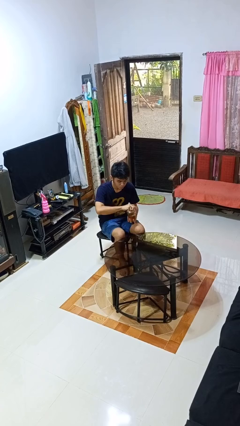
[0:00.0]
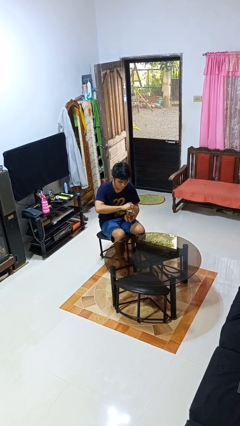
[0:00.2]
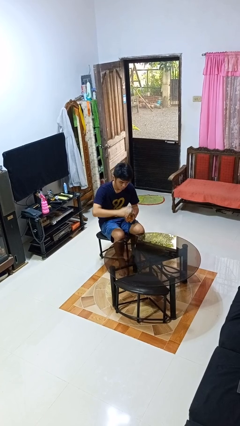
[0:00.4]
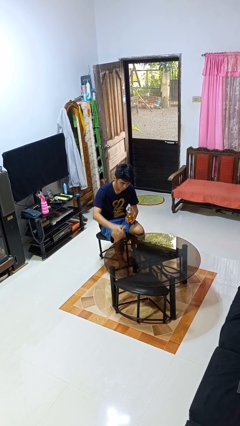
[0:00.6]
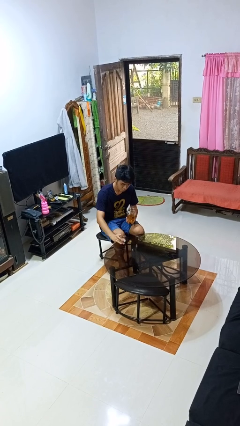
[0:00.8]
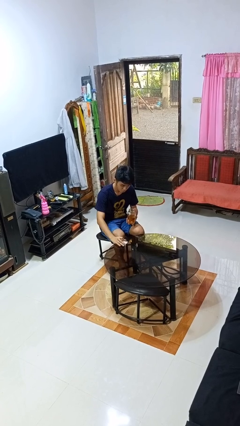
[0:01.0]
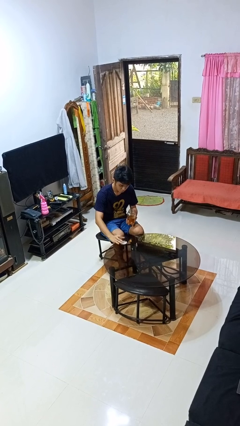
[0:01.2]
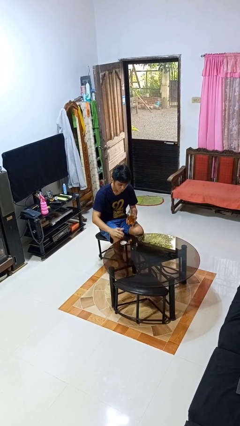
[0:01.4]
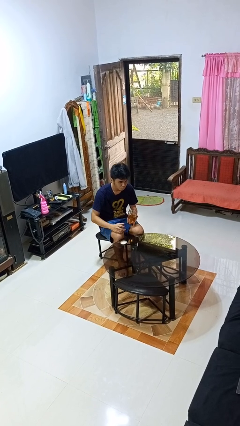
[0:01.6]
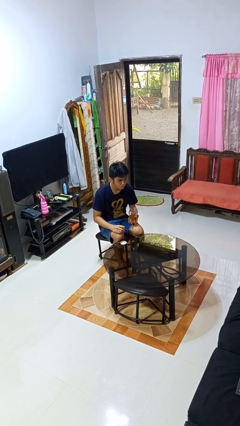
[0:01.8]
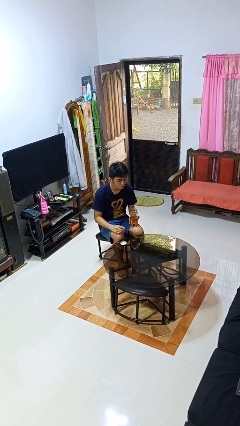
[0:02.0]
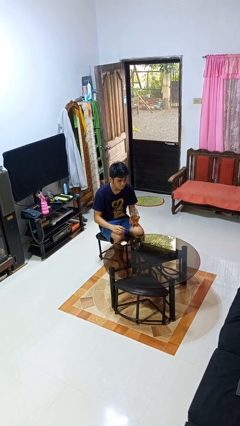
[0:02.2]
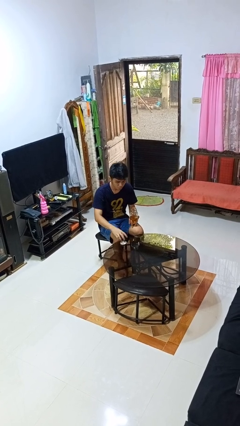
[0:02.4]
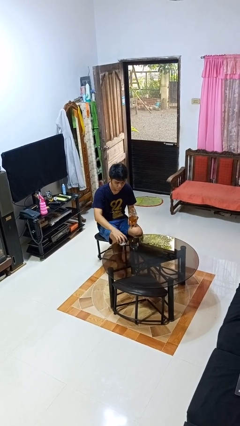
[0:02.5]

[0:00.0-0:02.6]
person opens jar

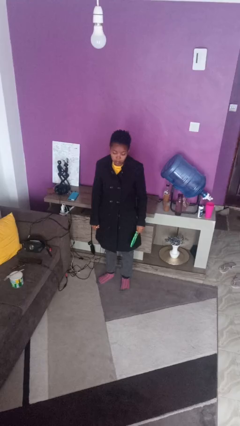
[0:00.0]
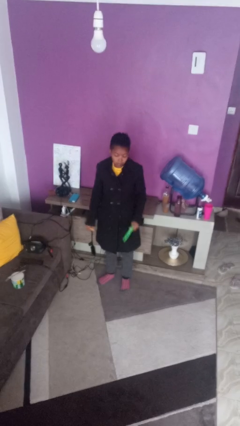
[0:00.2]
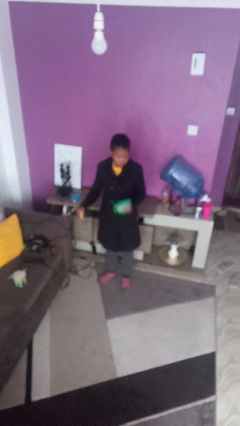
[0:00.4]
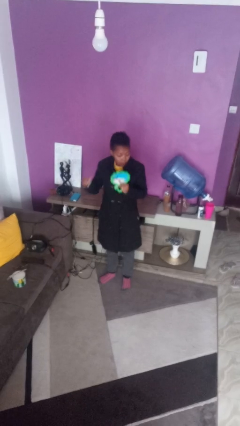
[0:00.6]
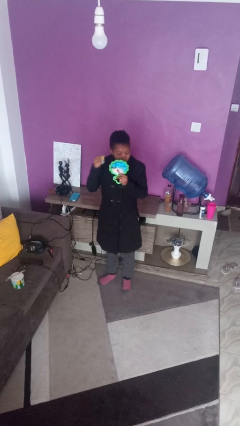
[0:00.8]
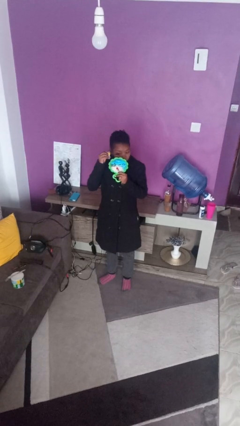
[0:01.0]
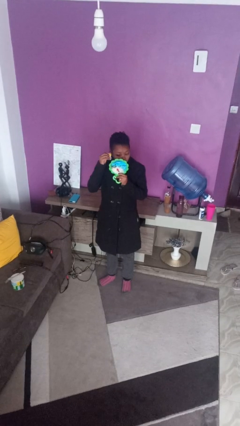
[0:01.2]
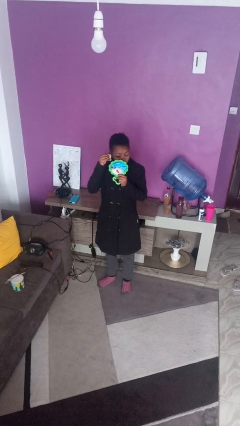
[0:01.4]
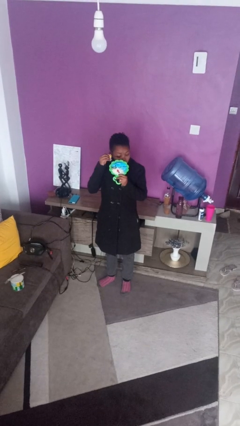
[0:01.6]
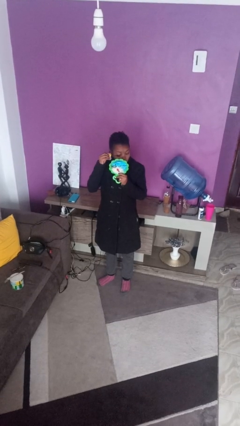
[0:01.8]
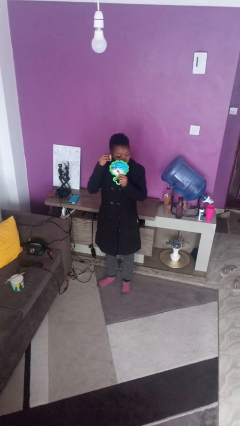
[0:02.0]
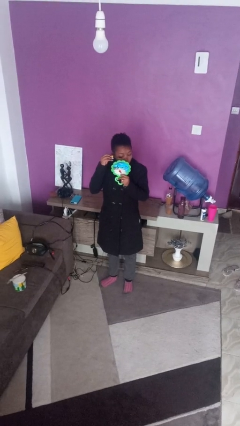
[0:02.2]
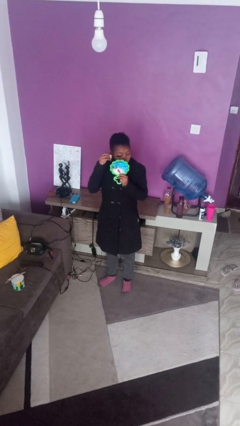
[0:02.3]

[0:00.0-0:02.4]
person applies eye makeup

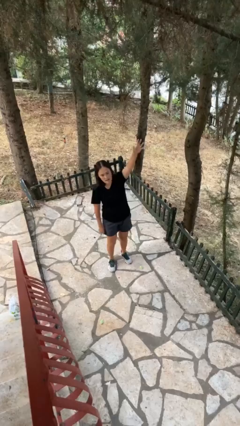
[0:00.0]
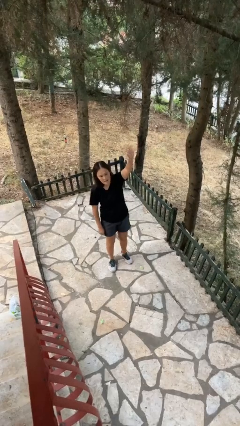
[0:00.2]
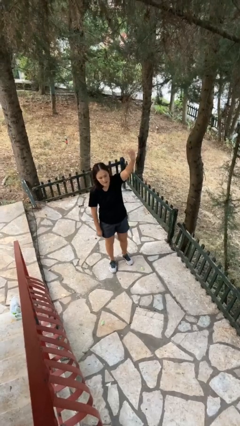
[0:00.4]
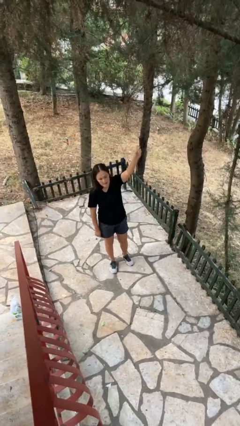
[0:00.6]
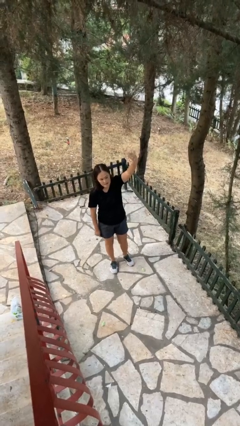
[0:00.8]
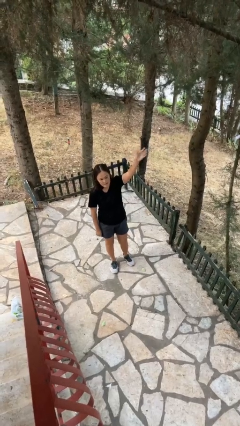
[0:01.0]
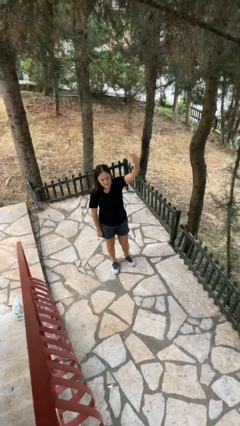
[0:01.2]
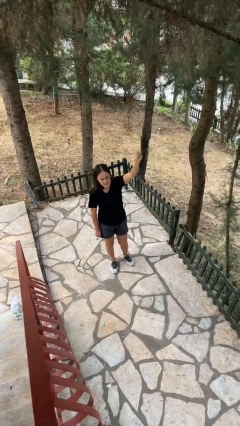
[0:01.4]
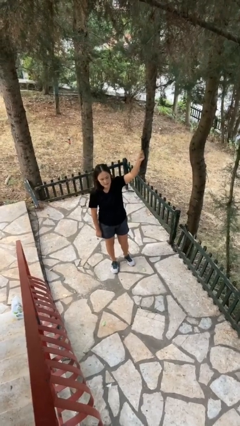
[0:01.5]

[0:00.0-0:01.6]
person gestures raise hand

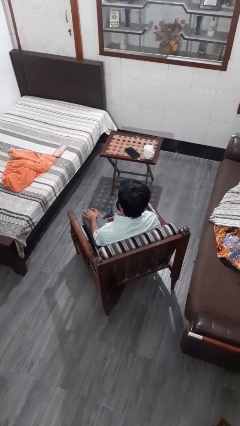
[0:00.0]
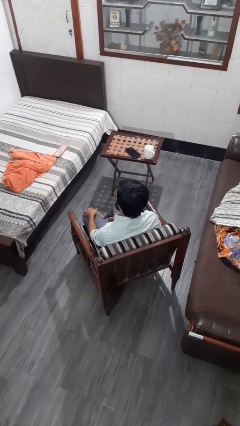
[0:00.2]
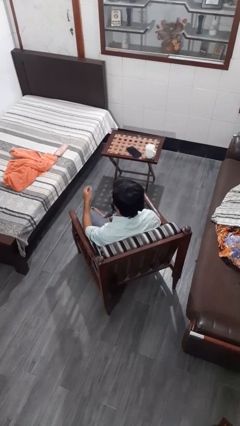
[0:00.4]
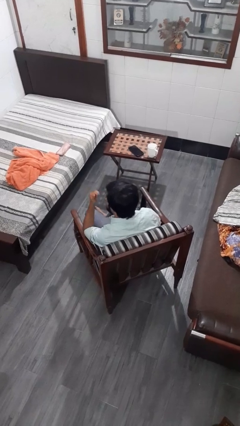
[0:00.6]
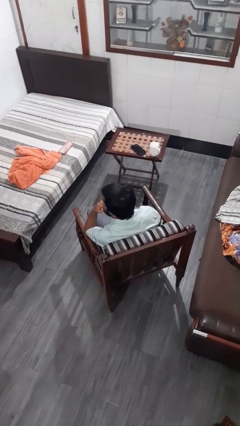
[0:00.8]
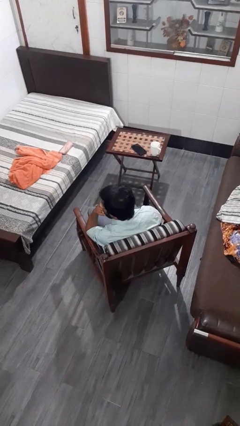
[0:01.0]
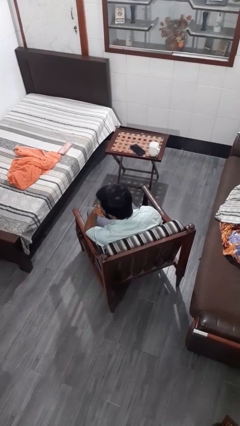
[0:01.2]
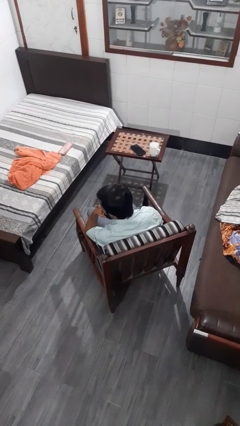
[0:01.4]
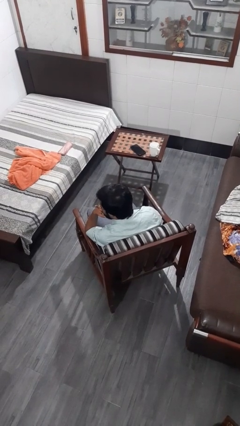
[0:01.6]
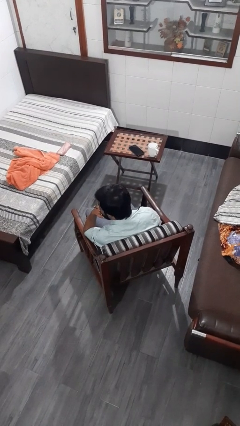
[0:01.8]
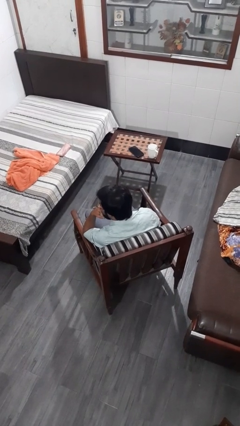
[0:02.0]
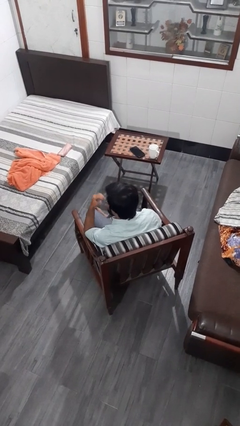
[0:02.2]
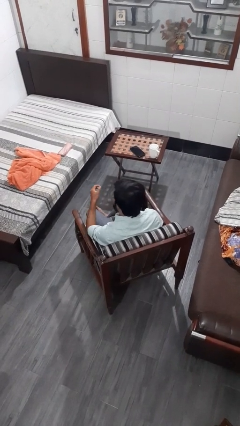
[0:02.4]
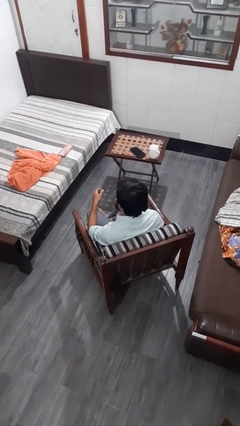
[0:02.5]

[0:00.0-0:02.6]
person strokes chin

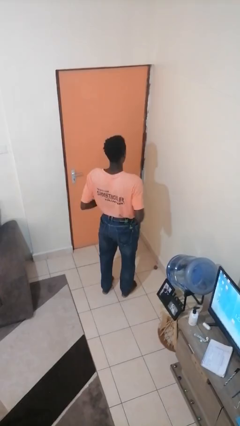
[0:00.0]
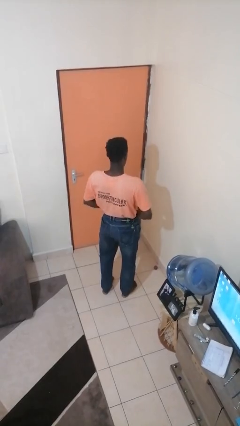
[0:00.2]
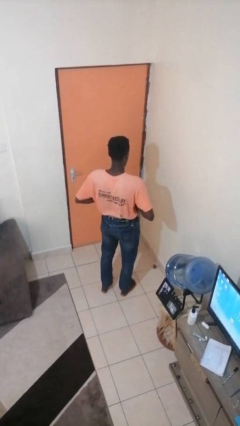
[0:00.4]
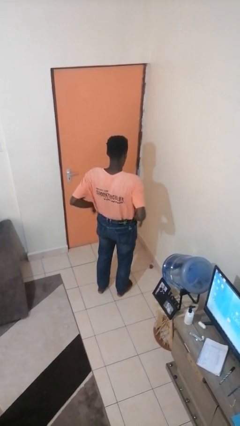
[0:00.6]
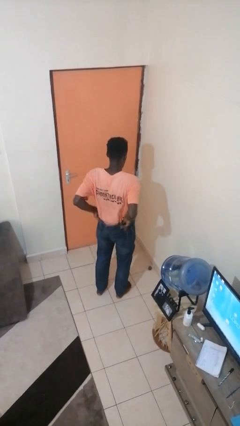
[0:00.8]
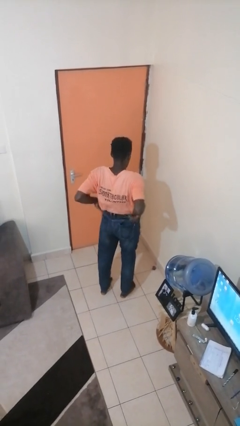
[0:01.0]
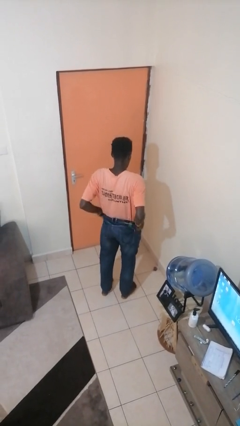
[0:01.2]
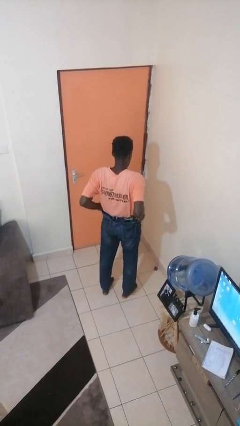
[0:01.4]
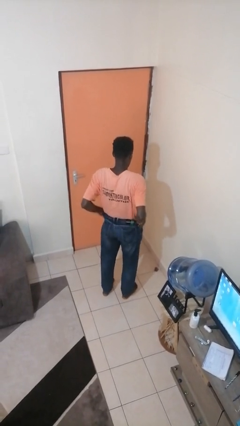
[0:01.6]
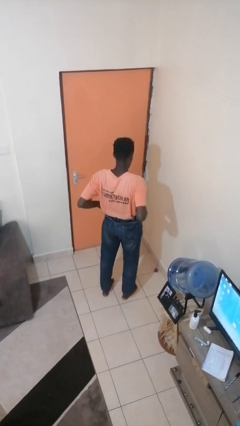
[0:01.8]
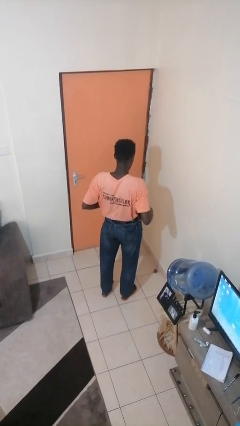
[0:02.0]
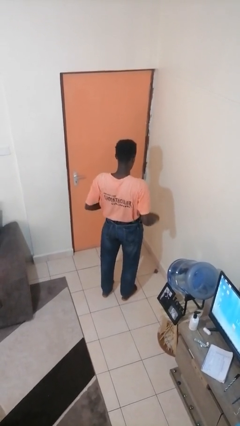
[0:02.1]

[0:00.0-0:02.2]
person hikes up pants

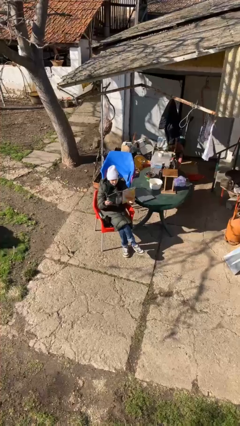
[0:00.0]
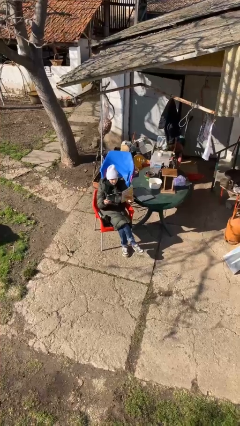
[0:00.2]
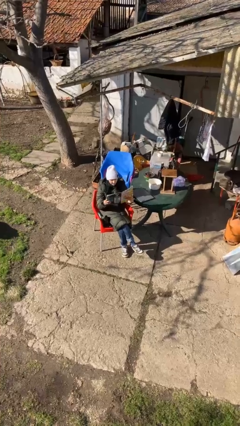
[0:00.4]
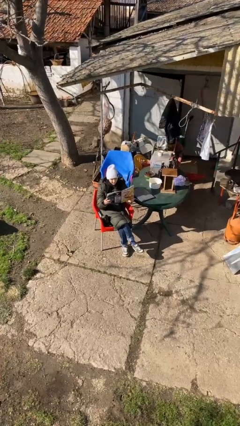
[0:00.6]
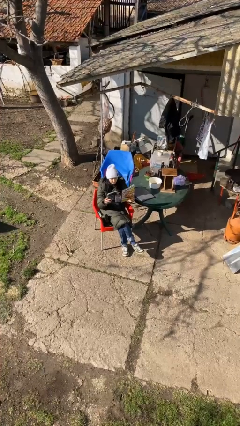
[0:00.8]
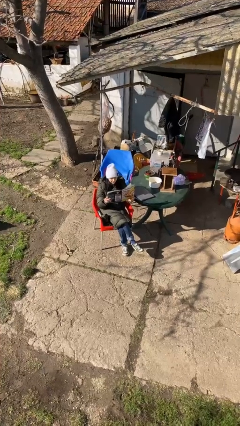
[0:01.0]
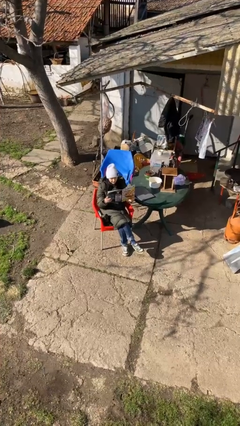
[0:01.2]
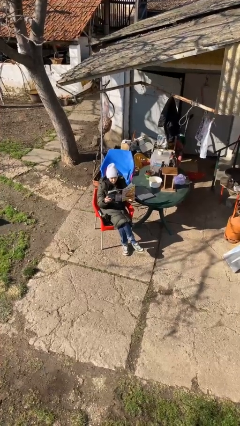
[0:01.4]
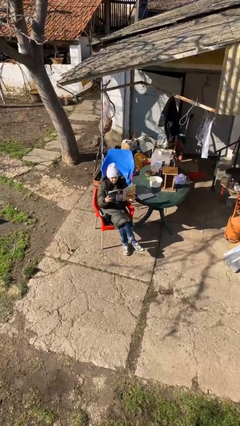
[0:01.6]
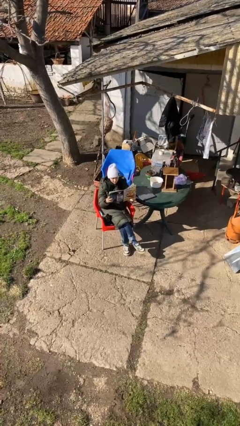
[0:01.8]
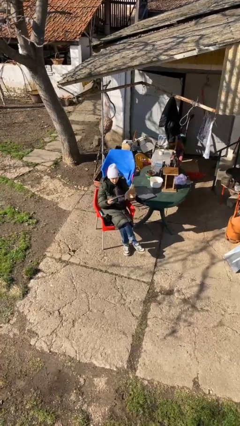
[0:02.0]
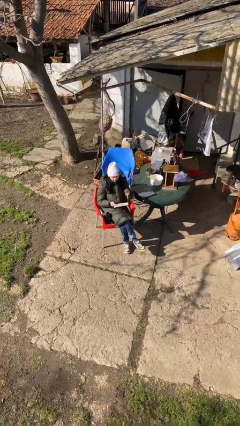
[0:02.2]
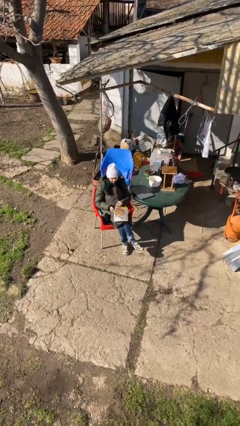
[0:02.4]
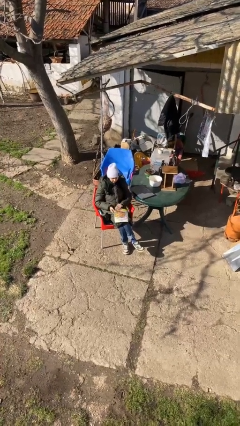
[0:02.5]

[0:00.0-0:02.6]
person reads document

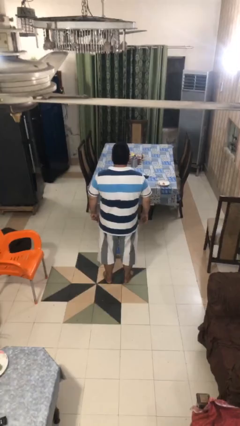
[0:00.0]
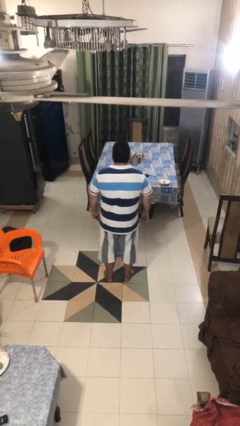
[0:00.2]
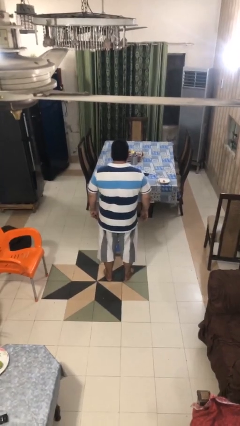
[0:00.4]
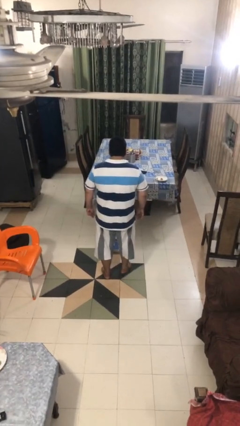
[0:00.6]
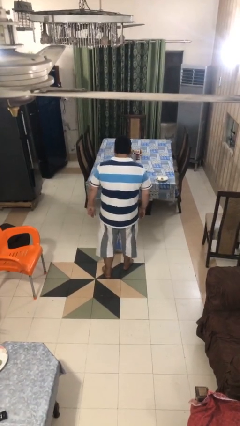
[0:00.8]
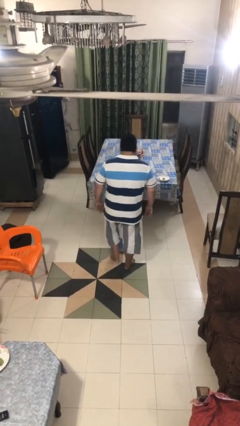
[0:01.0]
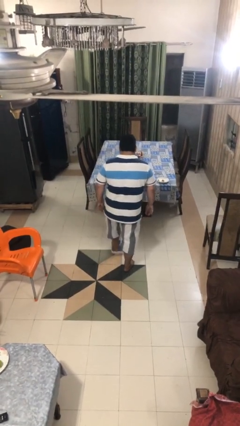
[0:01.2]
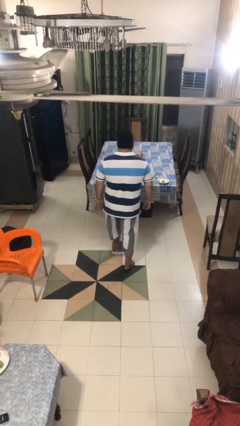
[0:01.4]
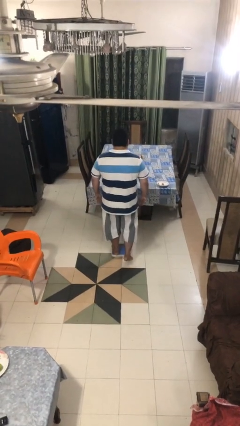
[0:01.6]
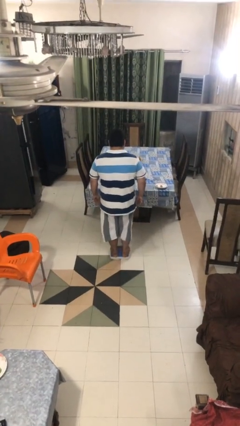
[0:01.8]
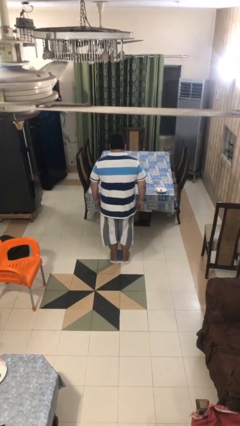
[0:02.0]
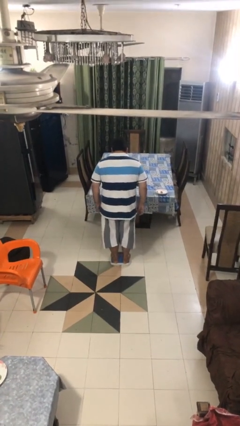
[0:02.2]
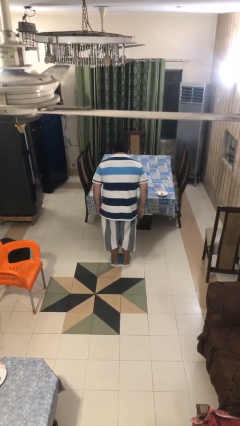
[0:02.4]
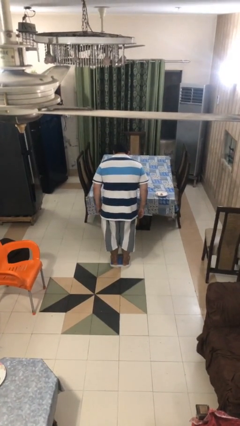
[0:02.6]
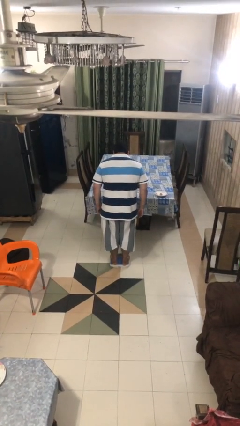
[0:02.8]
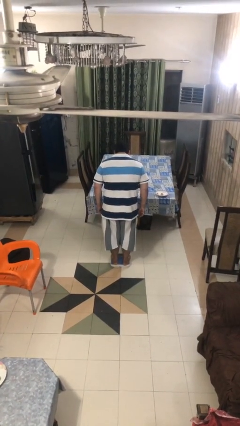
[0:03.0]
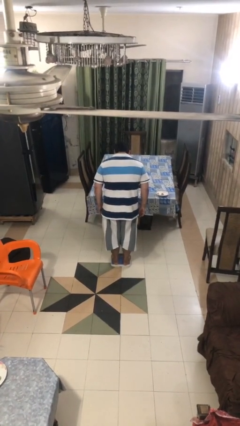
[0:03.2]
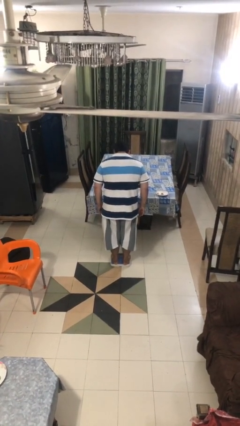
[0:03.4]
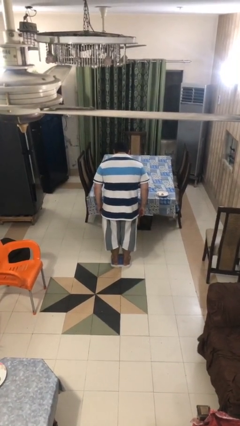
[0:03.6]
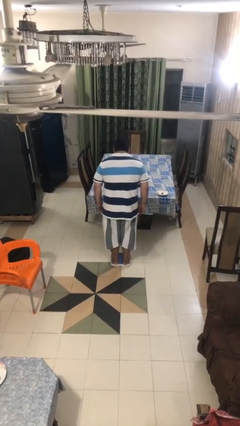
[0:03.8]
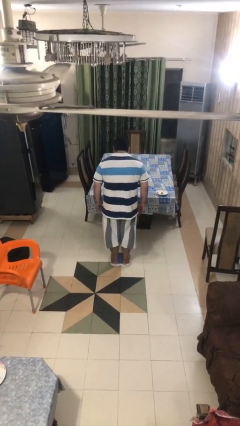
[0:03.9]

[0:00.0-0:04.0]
person uses bodyweight scale
